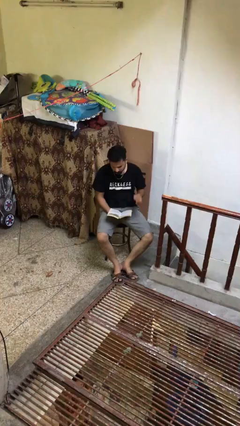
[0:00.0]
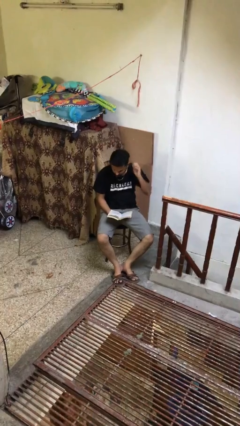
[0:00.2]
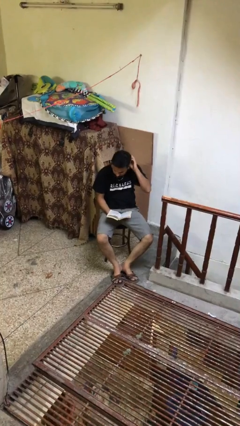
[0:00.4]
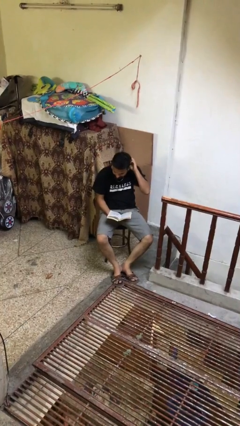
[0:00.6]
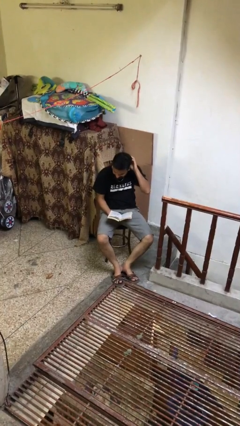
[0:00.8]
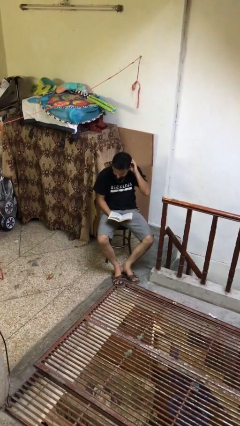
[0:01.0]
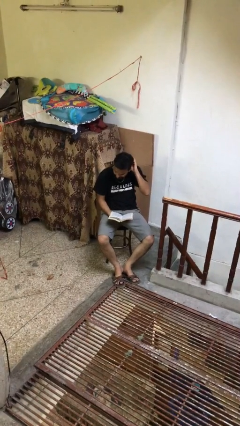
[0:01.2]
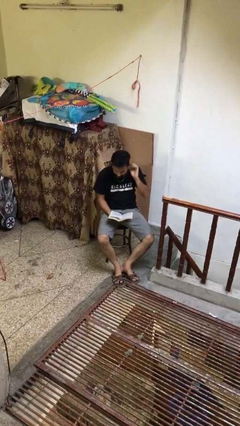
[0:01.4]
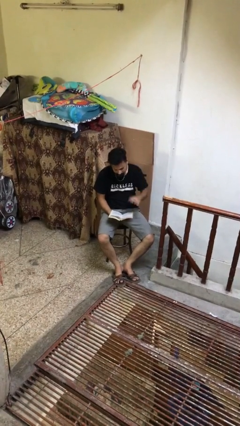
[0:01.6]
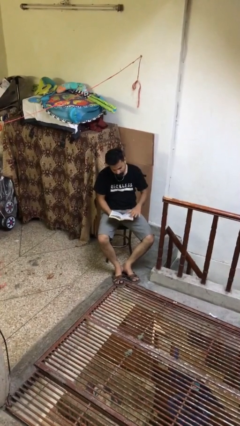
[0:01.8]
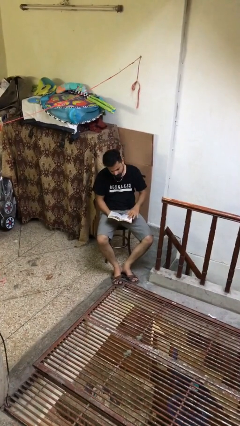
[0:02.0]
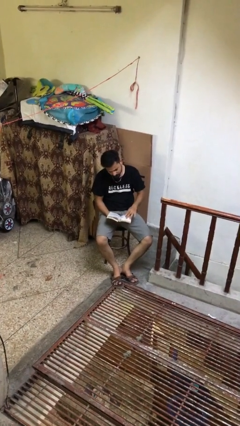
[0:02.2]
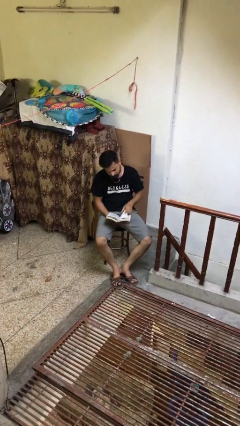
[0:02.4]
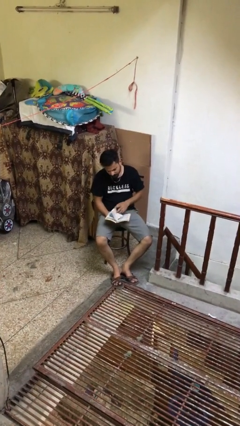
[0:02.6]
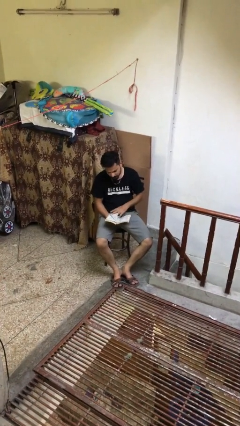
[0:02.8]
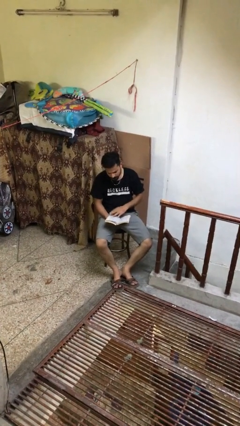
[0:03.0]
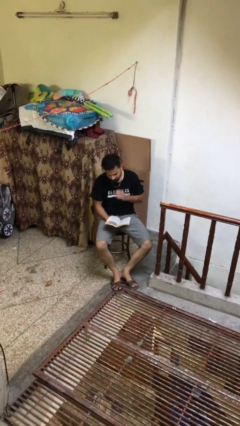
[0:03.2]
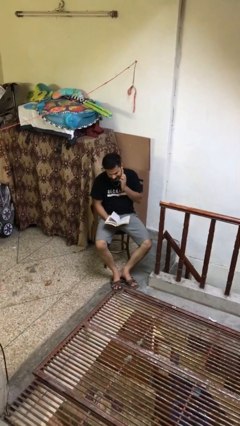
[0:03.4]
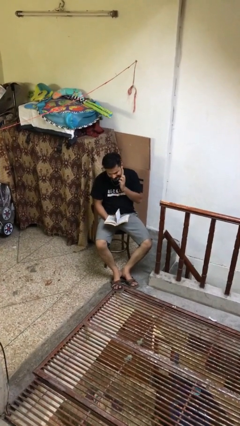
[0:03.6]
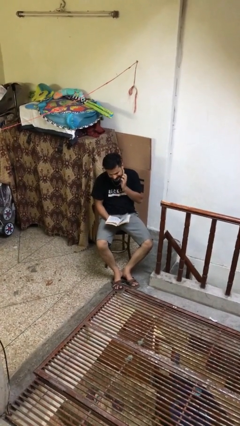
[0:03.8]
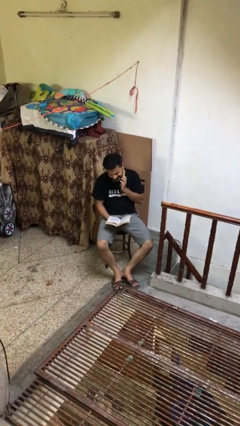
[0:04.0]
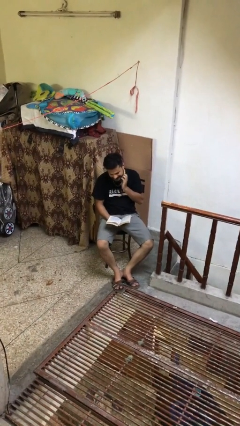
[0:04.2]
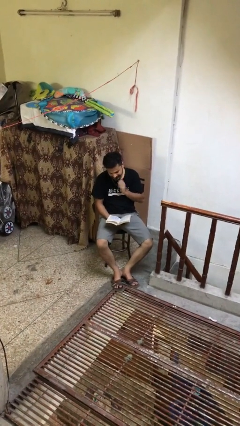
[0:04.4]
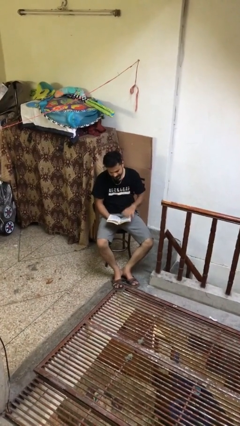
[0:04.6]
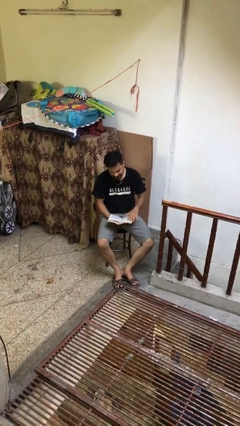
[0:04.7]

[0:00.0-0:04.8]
person reads document

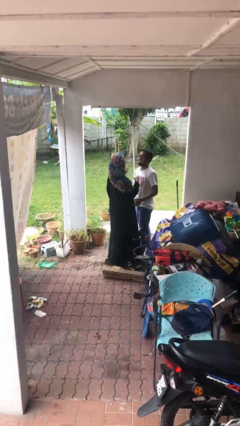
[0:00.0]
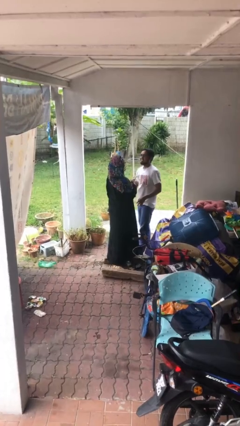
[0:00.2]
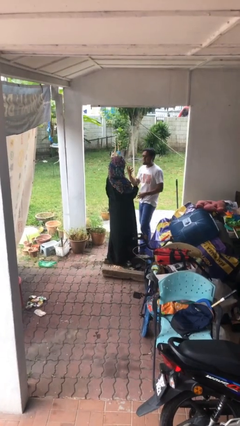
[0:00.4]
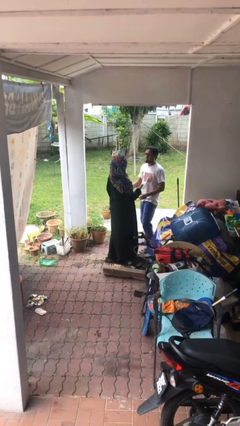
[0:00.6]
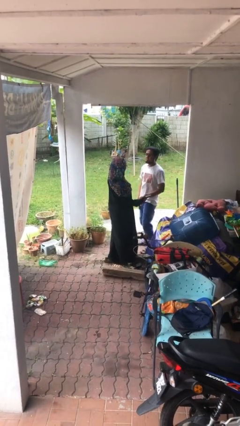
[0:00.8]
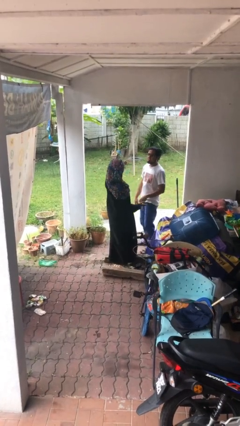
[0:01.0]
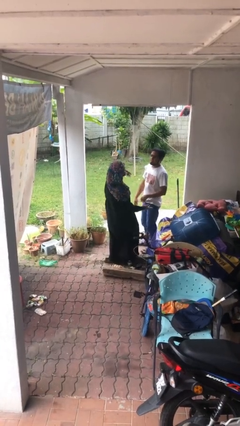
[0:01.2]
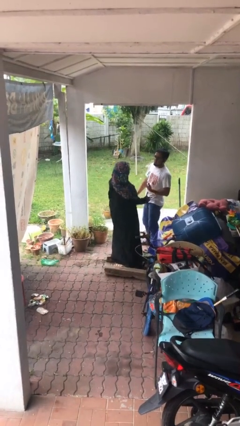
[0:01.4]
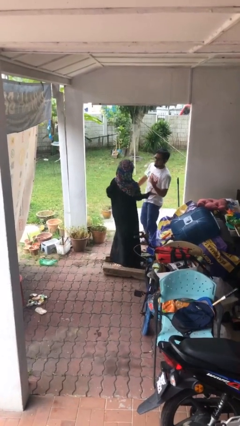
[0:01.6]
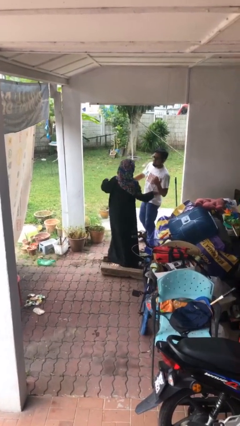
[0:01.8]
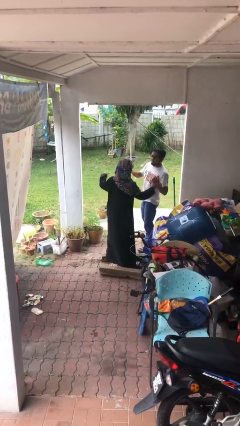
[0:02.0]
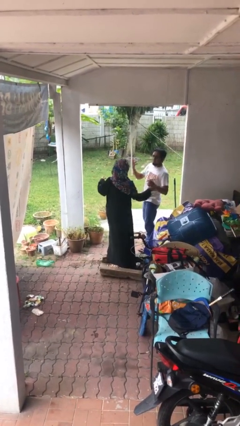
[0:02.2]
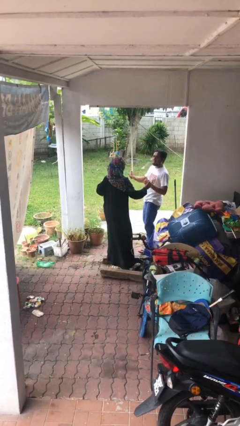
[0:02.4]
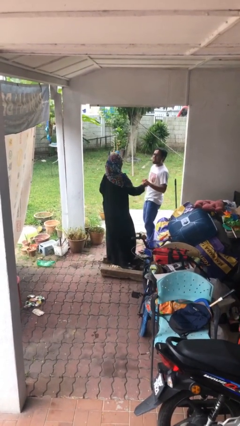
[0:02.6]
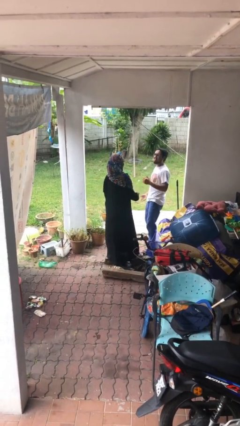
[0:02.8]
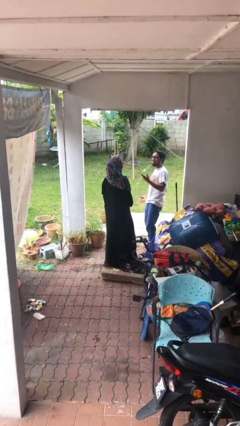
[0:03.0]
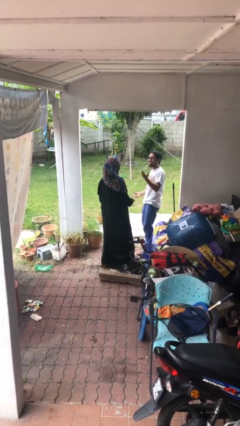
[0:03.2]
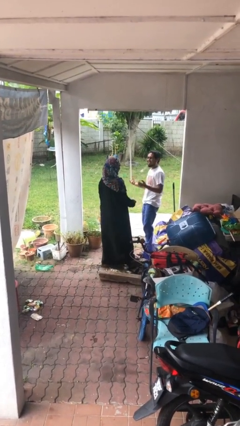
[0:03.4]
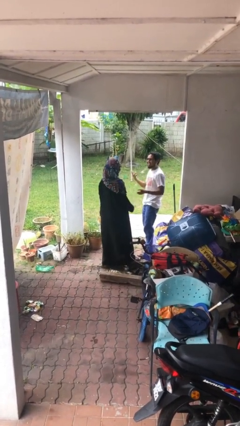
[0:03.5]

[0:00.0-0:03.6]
person talks to person

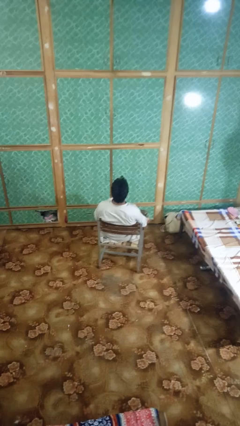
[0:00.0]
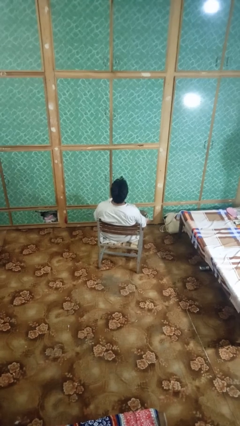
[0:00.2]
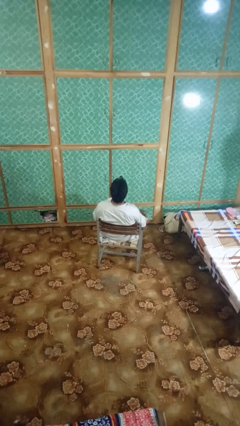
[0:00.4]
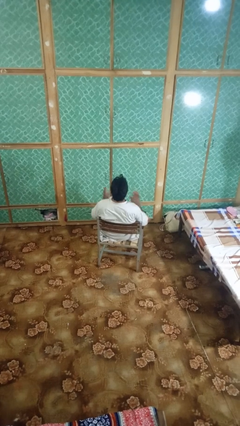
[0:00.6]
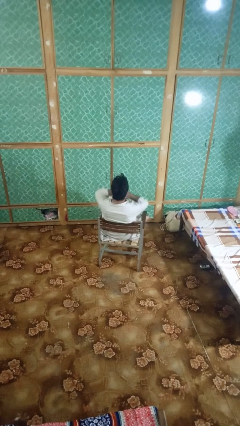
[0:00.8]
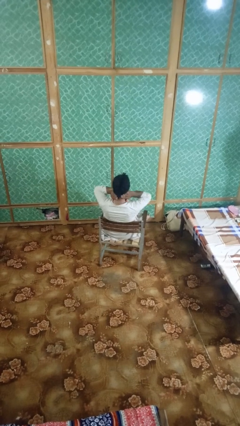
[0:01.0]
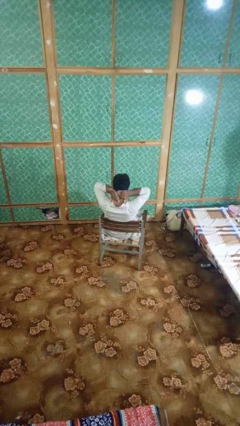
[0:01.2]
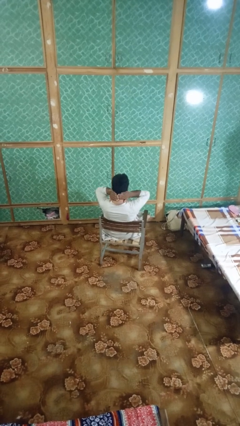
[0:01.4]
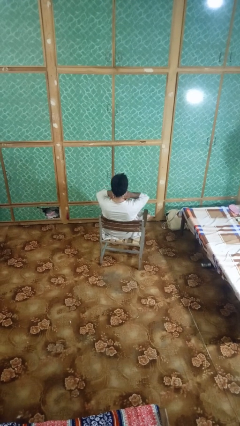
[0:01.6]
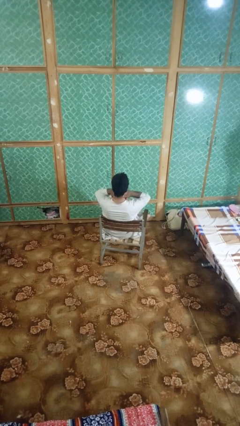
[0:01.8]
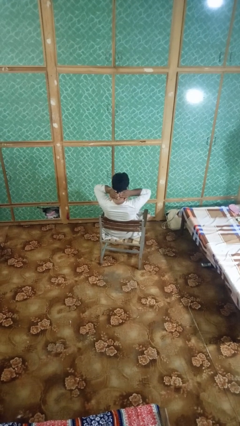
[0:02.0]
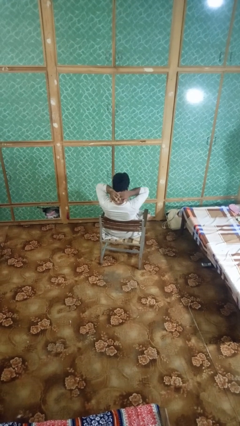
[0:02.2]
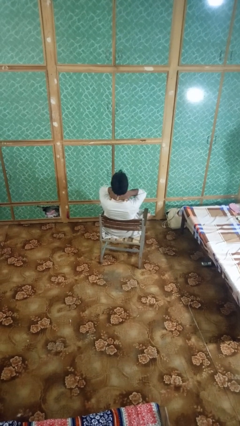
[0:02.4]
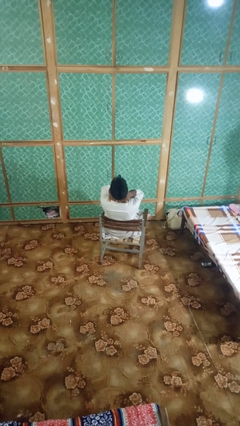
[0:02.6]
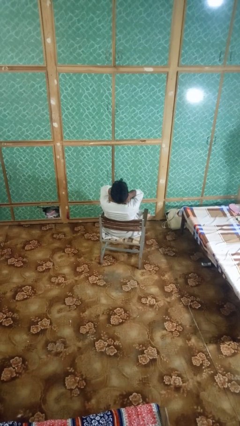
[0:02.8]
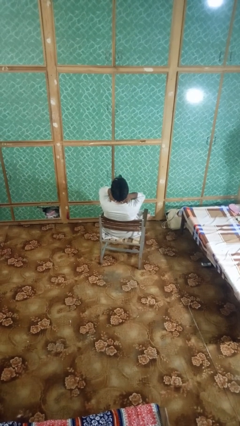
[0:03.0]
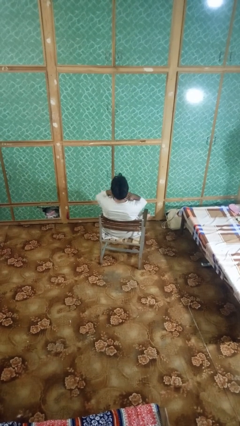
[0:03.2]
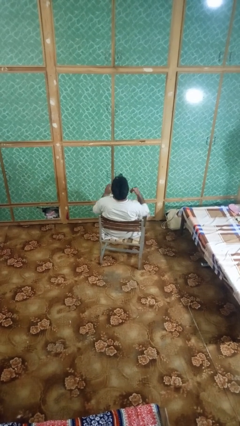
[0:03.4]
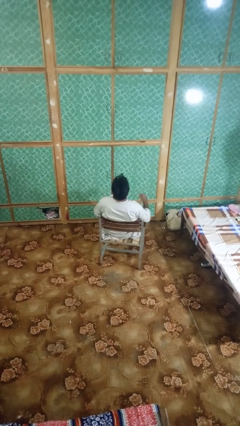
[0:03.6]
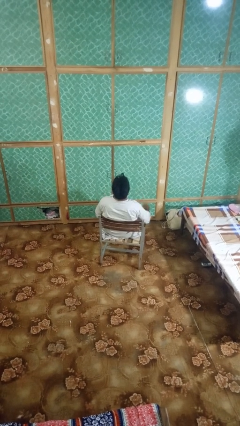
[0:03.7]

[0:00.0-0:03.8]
person rubs neck

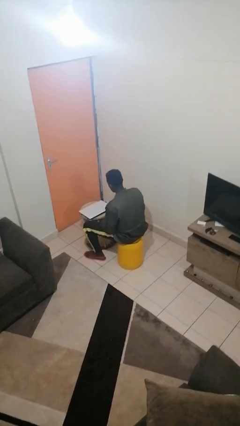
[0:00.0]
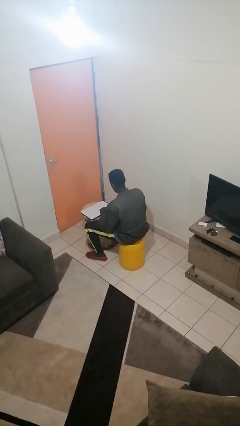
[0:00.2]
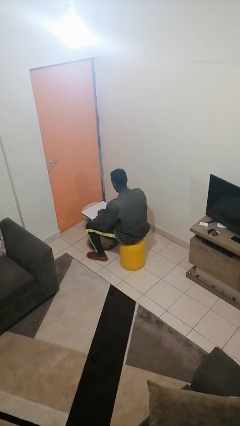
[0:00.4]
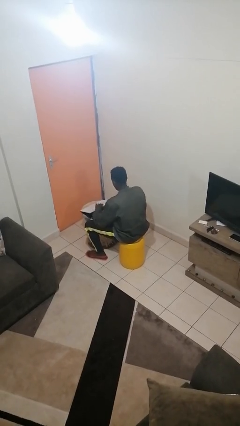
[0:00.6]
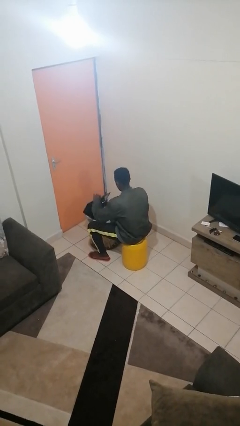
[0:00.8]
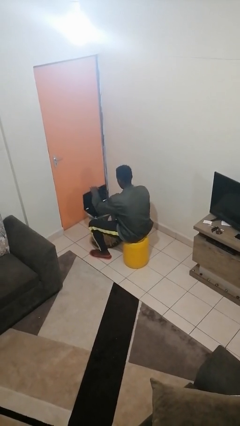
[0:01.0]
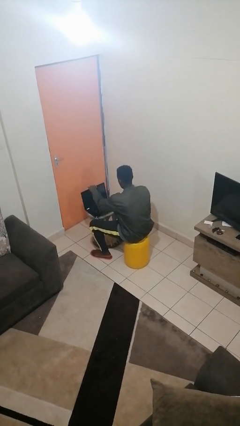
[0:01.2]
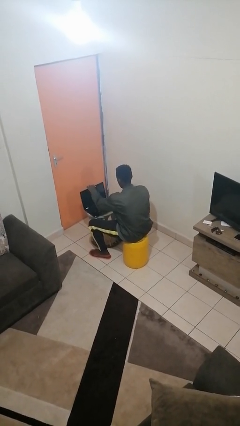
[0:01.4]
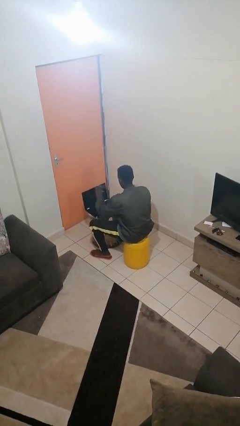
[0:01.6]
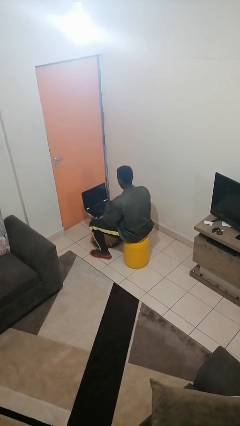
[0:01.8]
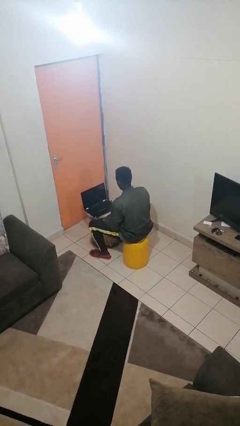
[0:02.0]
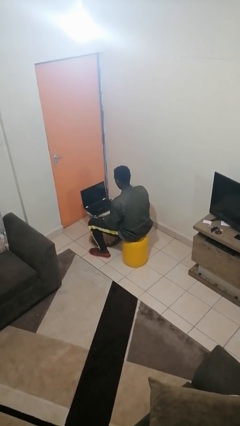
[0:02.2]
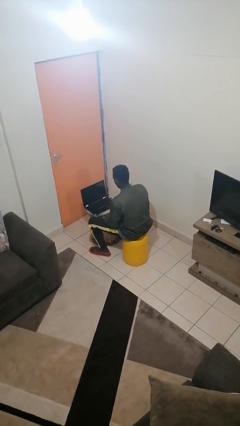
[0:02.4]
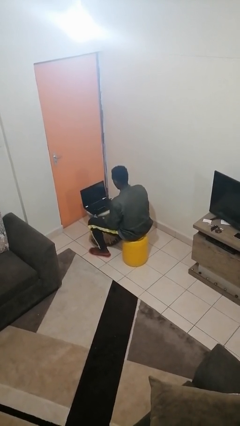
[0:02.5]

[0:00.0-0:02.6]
person opens laptop

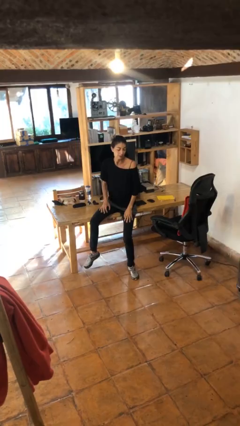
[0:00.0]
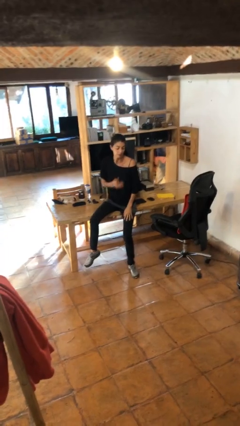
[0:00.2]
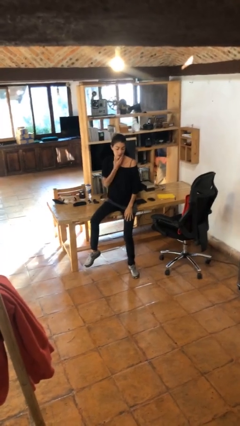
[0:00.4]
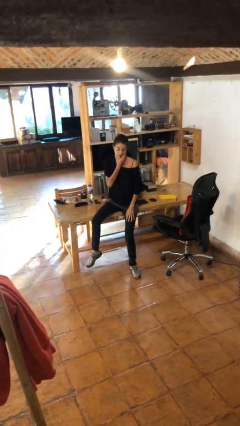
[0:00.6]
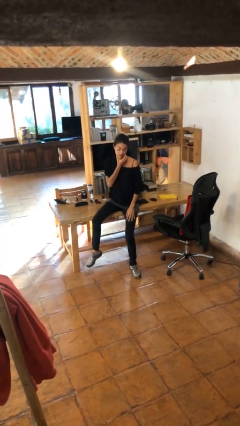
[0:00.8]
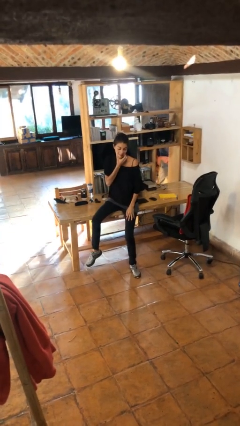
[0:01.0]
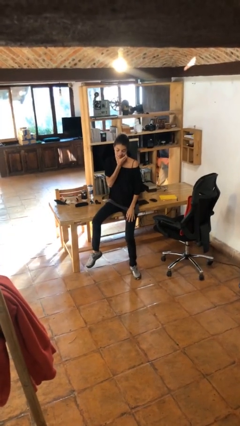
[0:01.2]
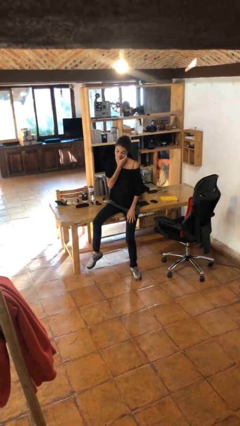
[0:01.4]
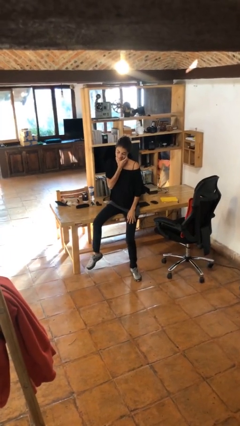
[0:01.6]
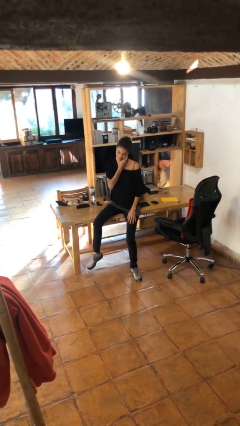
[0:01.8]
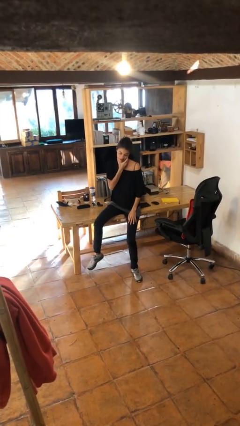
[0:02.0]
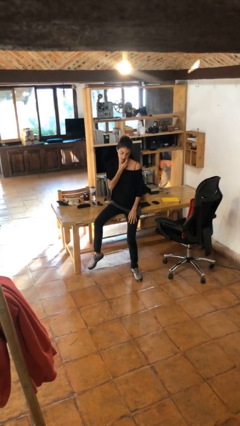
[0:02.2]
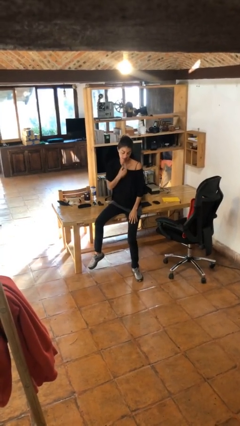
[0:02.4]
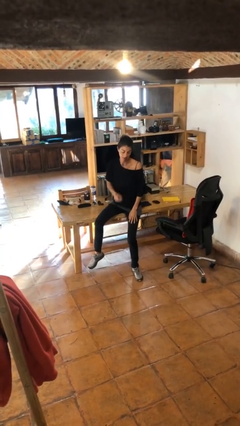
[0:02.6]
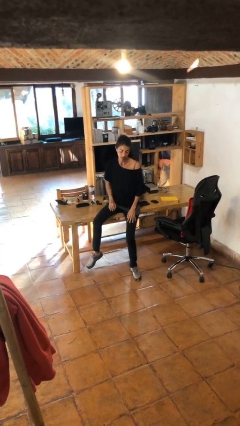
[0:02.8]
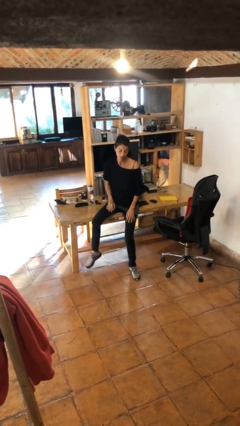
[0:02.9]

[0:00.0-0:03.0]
person scratches face

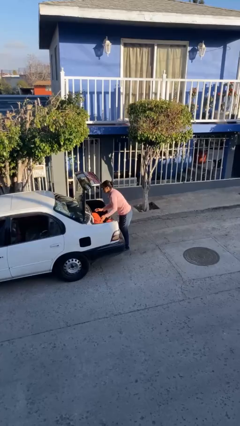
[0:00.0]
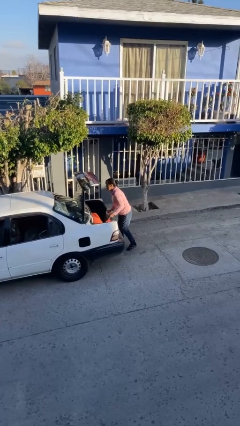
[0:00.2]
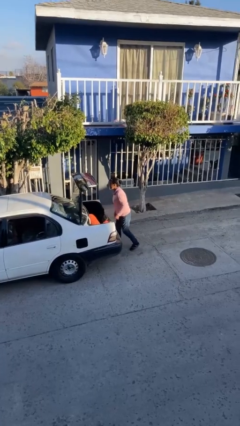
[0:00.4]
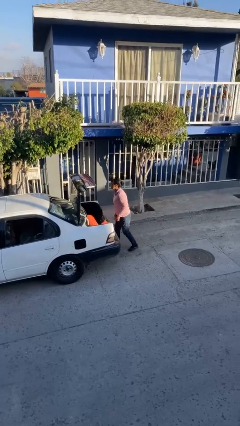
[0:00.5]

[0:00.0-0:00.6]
person loads car
